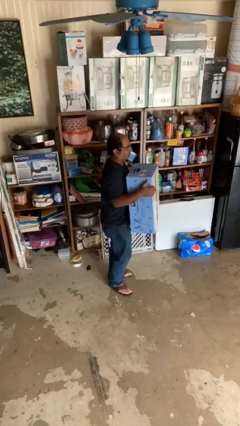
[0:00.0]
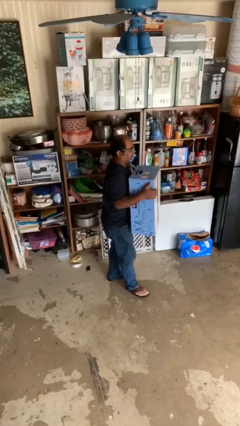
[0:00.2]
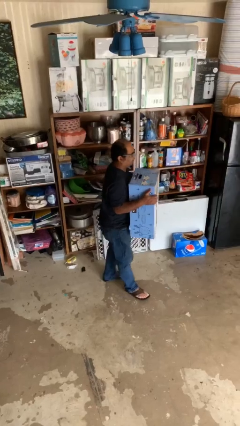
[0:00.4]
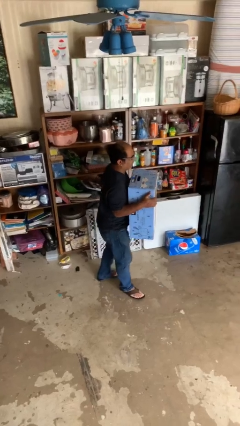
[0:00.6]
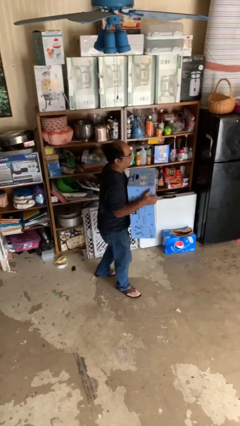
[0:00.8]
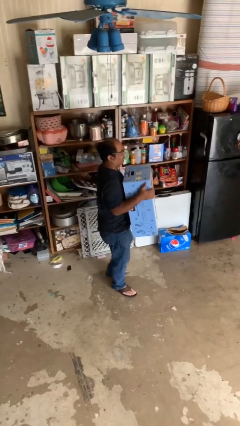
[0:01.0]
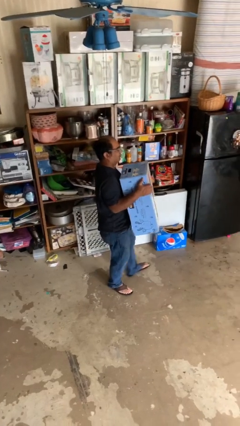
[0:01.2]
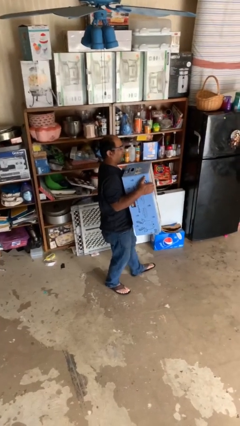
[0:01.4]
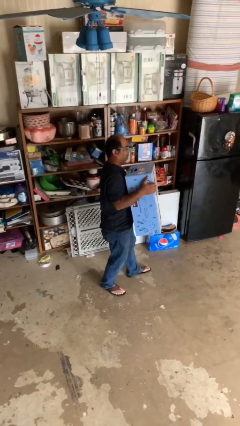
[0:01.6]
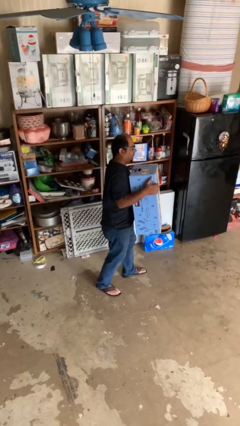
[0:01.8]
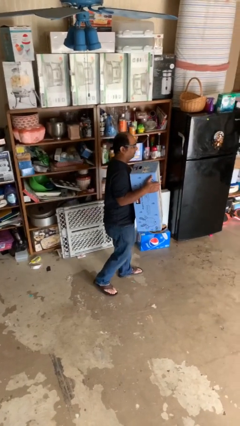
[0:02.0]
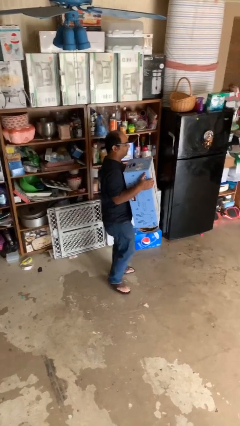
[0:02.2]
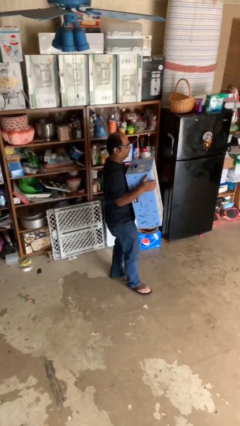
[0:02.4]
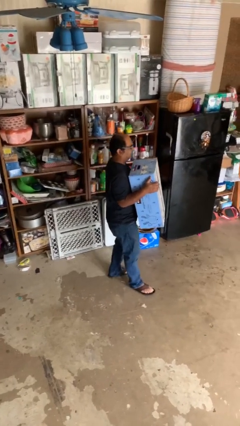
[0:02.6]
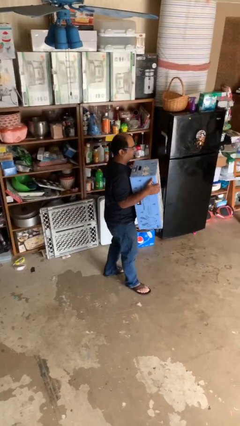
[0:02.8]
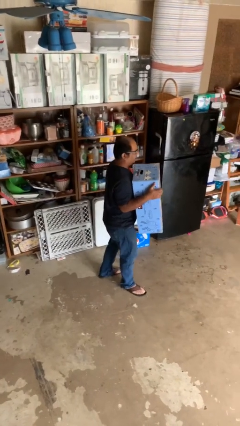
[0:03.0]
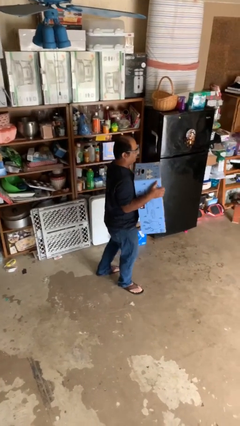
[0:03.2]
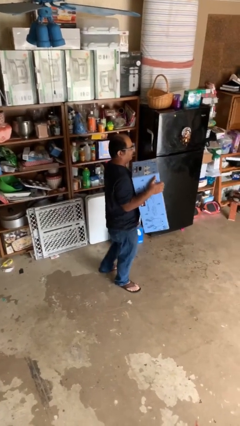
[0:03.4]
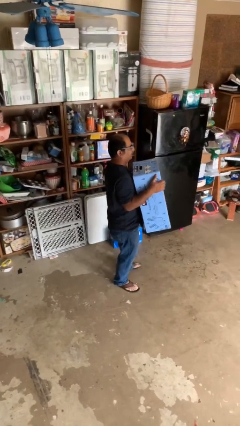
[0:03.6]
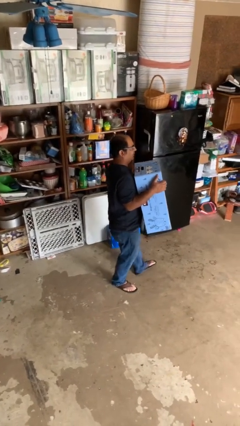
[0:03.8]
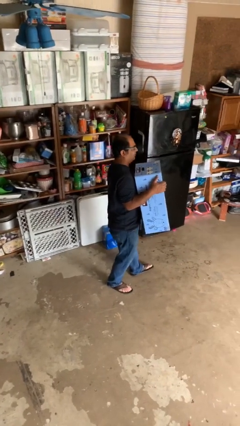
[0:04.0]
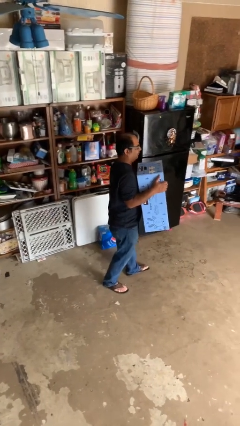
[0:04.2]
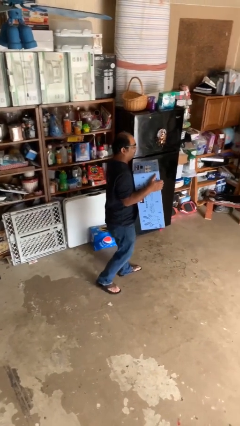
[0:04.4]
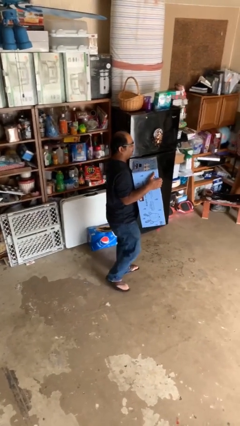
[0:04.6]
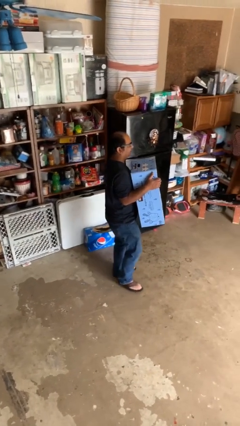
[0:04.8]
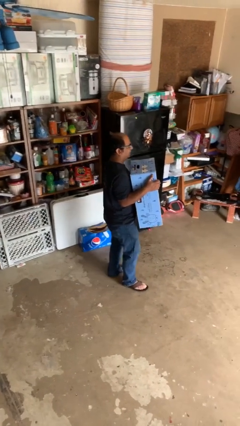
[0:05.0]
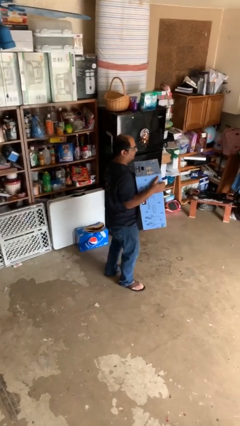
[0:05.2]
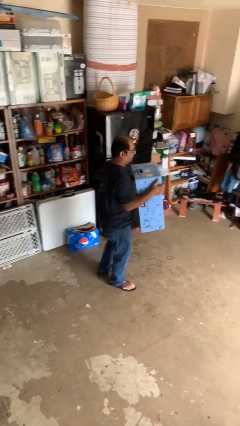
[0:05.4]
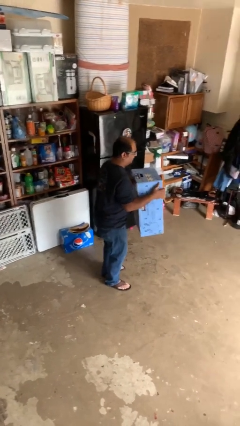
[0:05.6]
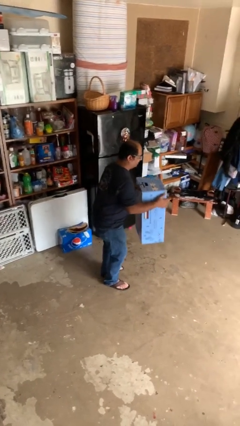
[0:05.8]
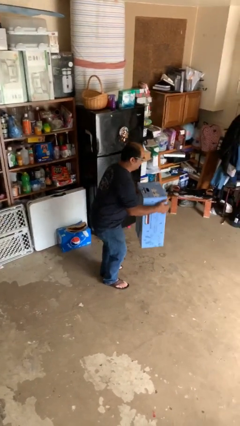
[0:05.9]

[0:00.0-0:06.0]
person carries heavy object

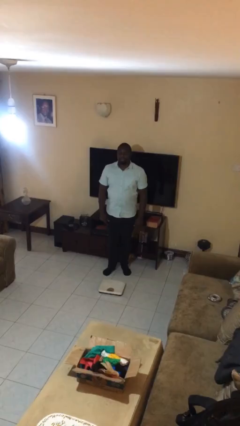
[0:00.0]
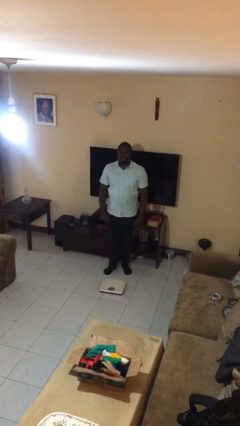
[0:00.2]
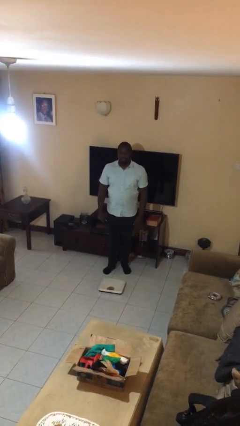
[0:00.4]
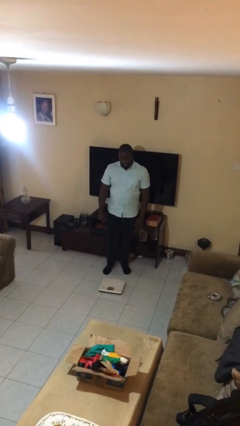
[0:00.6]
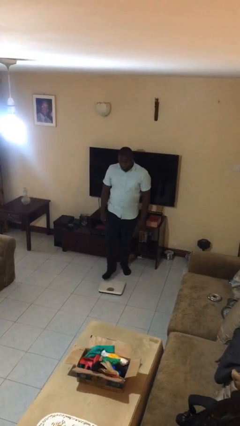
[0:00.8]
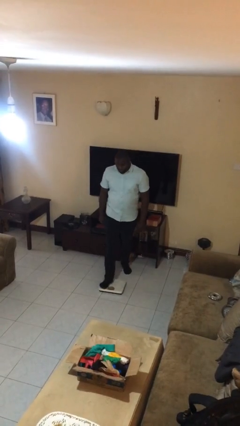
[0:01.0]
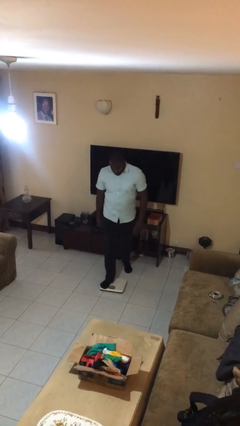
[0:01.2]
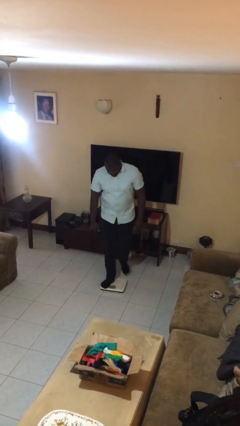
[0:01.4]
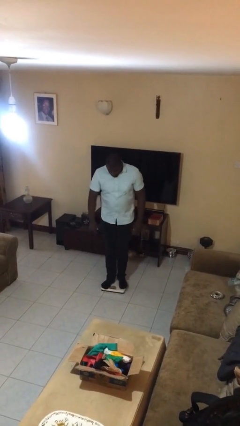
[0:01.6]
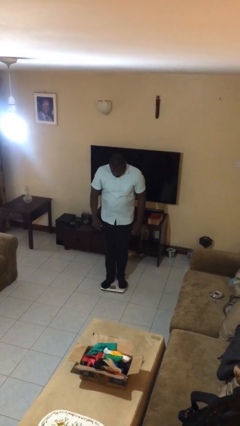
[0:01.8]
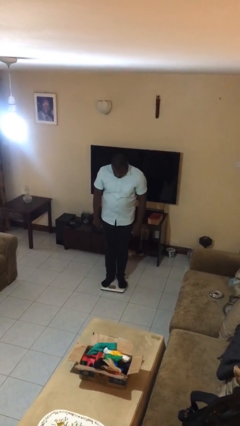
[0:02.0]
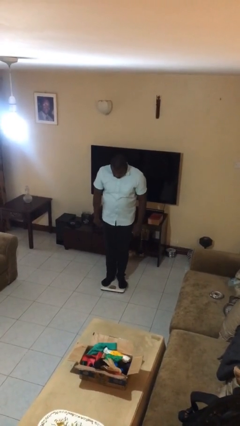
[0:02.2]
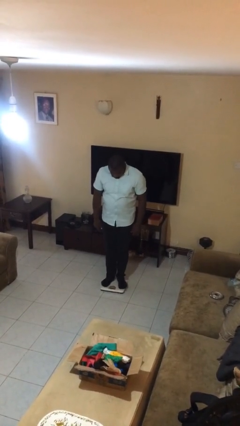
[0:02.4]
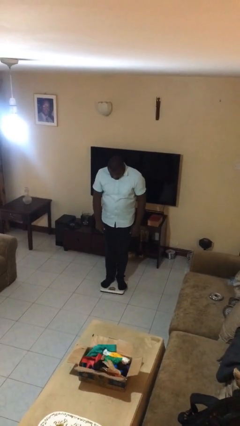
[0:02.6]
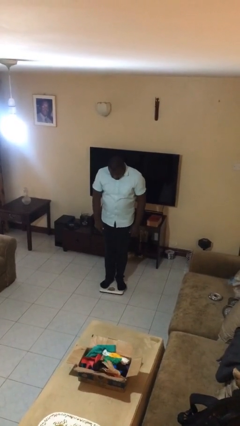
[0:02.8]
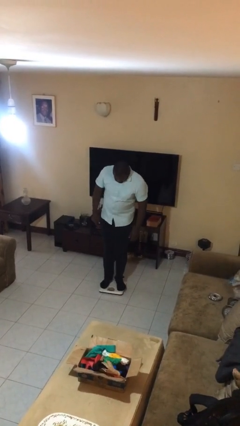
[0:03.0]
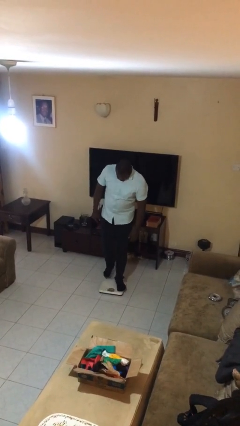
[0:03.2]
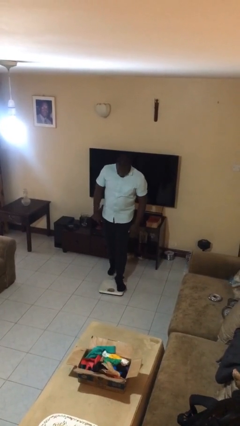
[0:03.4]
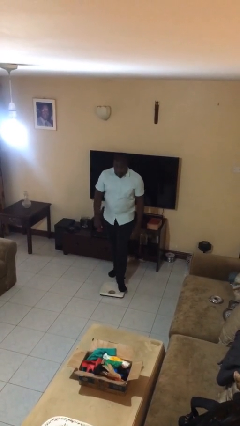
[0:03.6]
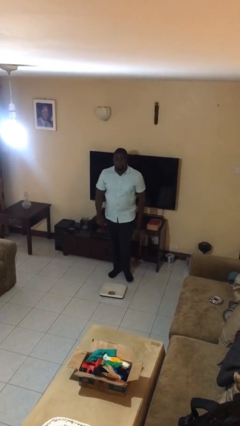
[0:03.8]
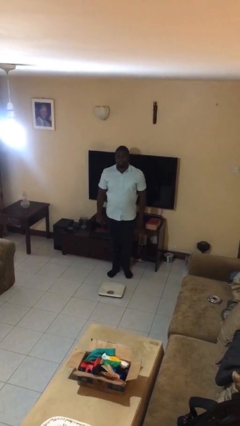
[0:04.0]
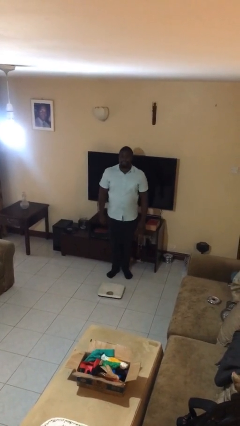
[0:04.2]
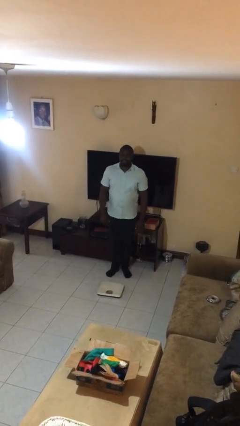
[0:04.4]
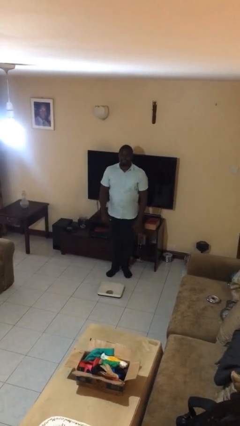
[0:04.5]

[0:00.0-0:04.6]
person uses bodyweight scale

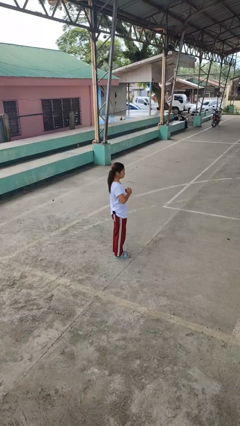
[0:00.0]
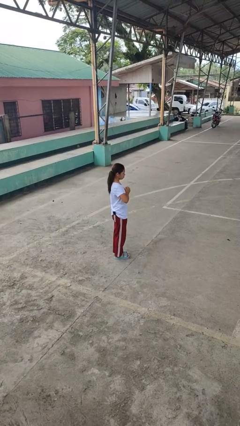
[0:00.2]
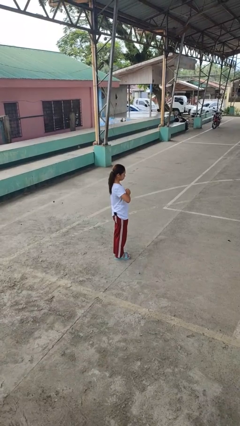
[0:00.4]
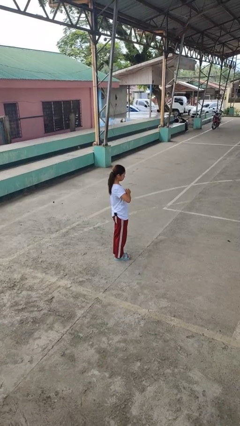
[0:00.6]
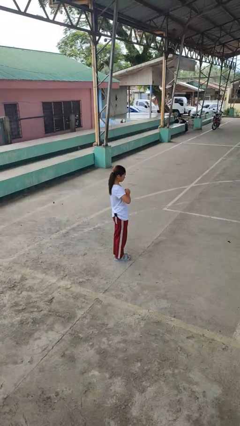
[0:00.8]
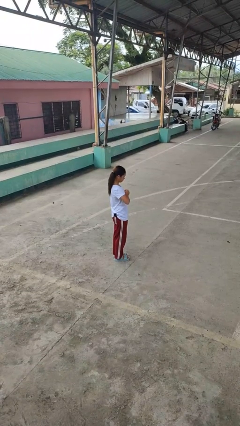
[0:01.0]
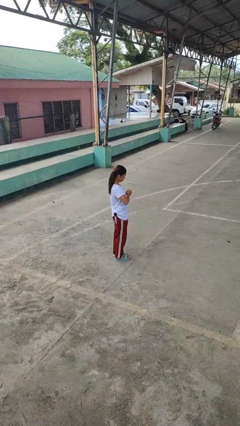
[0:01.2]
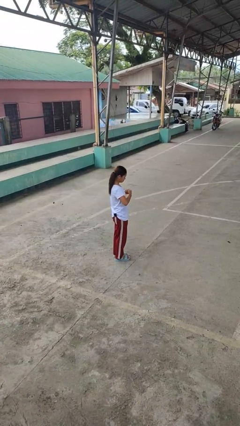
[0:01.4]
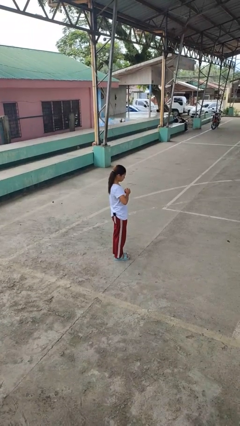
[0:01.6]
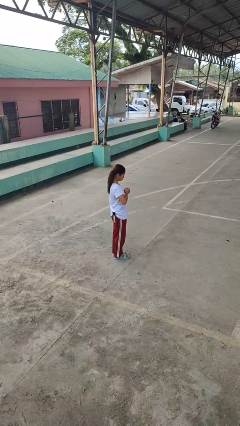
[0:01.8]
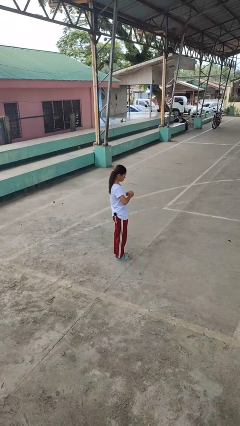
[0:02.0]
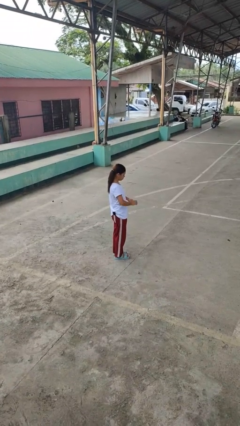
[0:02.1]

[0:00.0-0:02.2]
person cracks knuckles

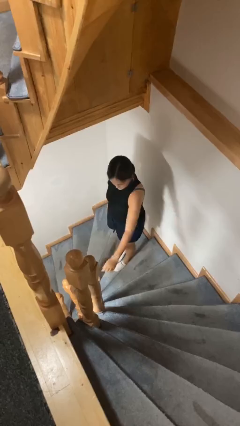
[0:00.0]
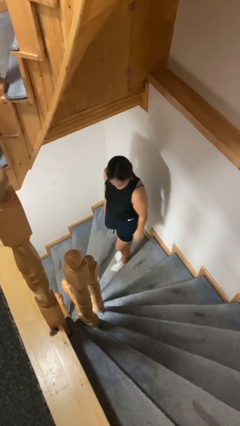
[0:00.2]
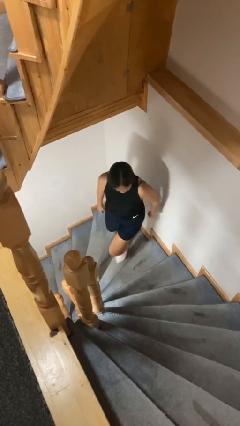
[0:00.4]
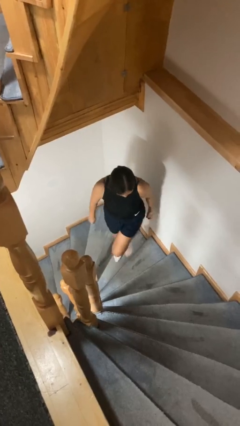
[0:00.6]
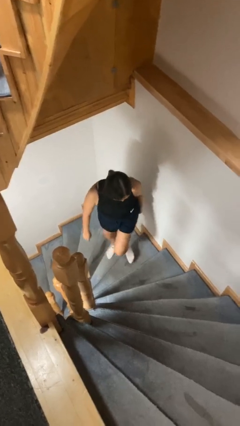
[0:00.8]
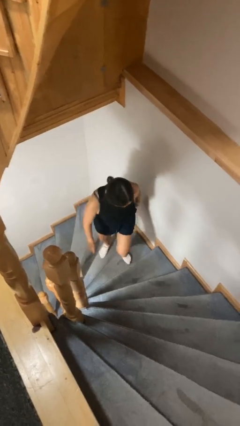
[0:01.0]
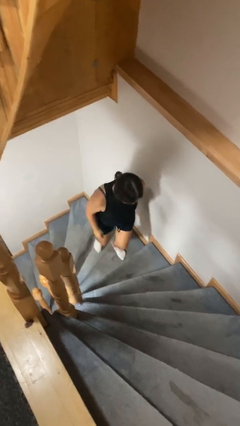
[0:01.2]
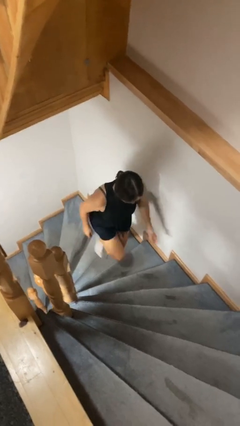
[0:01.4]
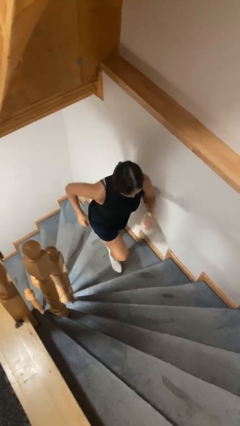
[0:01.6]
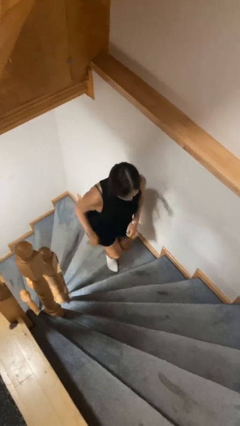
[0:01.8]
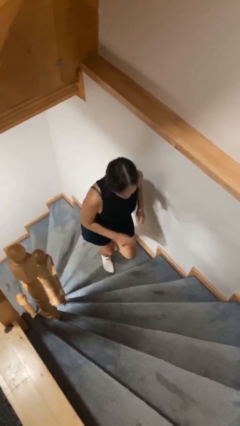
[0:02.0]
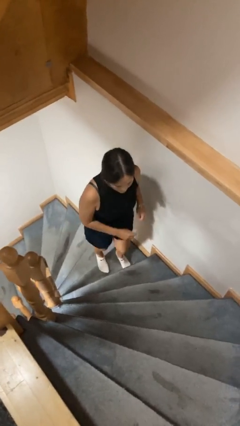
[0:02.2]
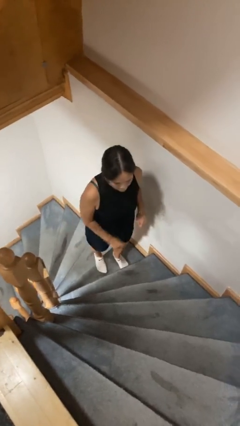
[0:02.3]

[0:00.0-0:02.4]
person climbs up stairs

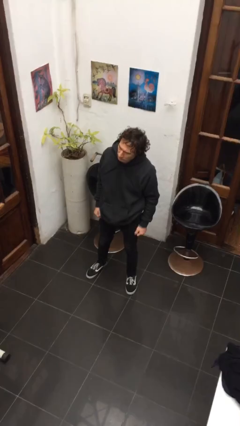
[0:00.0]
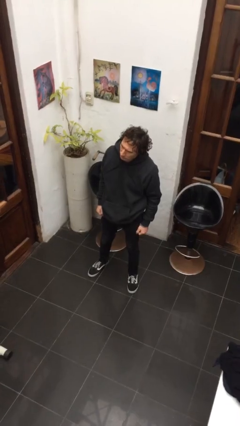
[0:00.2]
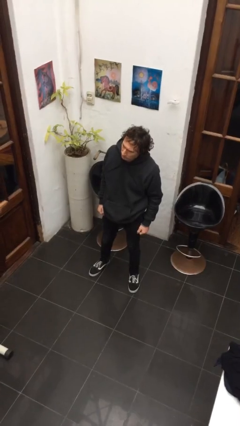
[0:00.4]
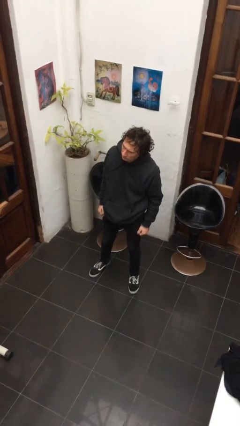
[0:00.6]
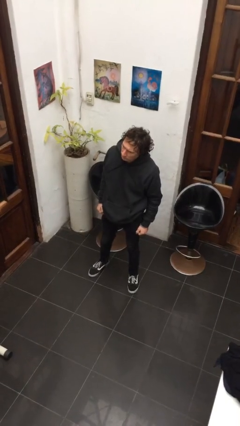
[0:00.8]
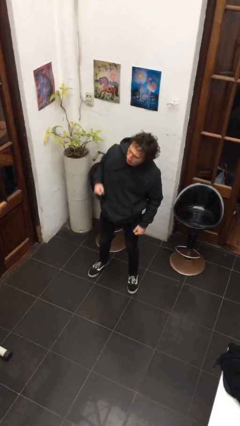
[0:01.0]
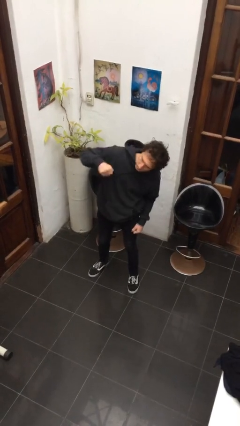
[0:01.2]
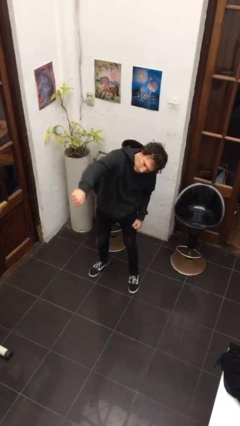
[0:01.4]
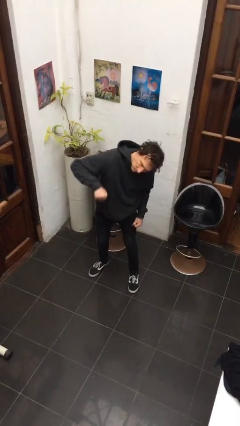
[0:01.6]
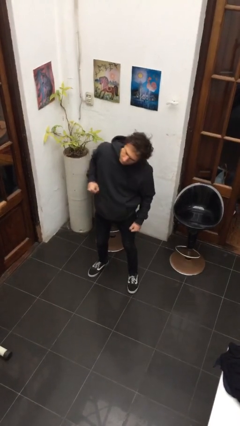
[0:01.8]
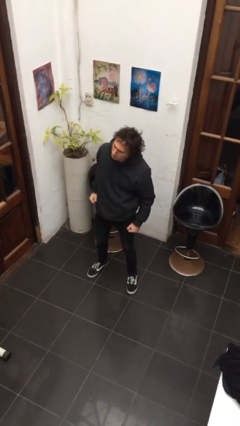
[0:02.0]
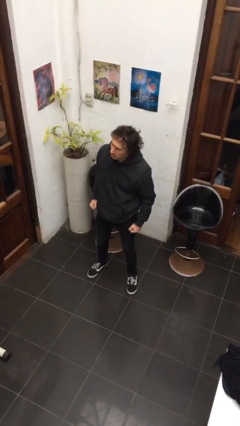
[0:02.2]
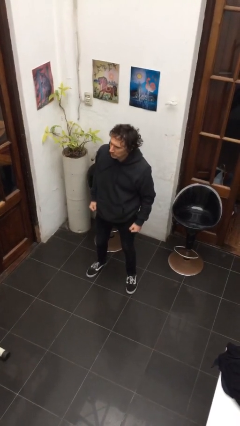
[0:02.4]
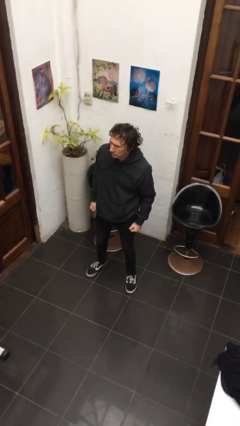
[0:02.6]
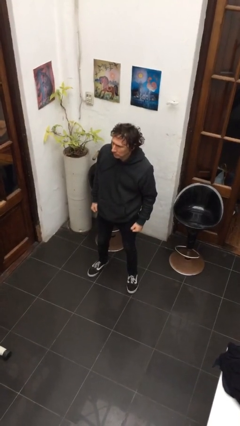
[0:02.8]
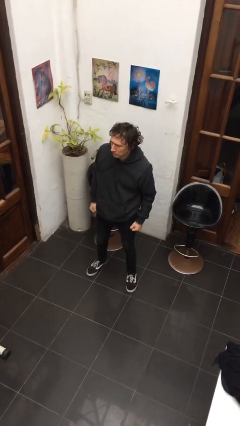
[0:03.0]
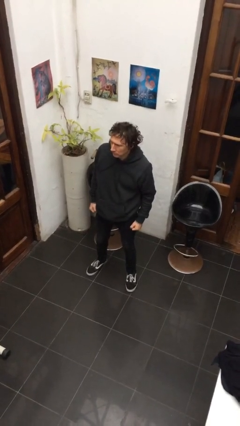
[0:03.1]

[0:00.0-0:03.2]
person punches
